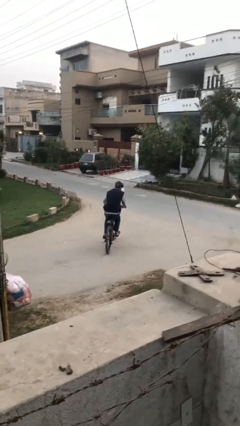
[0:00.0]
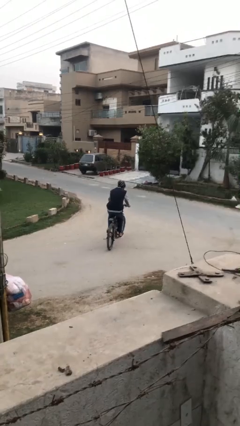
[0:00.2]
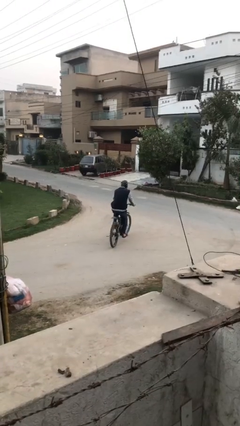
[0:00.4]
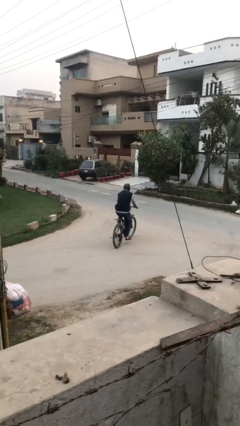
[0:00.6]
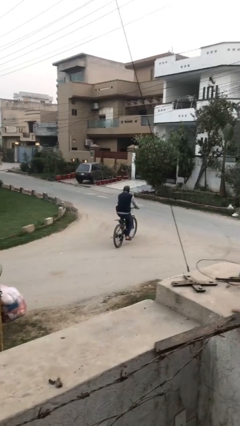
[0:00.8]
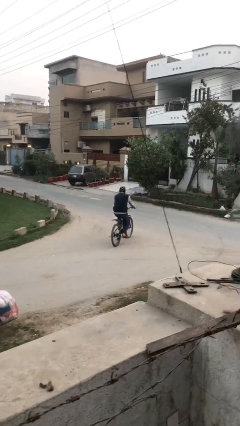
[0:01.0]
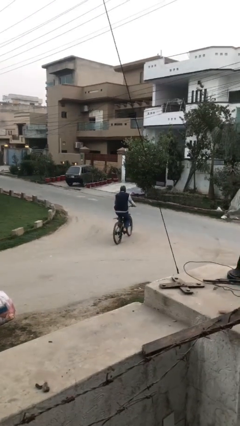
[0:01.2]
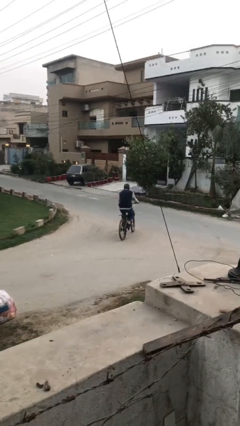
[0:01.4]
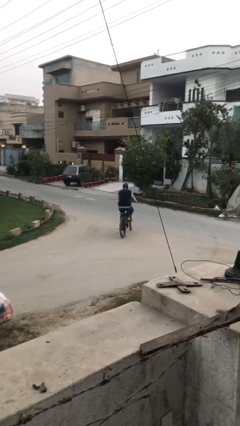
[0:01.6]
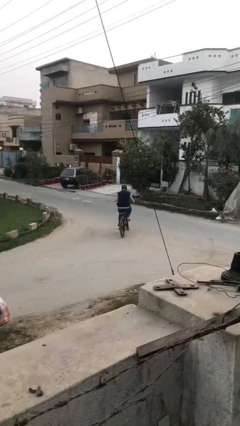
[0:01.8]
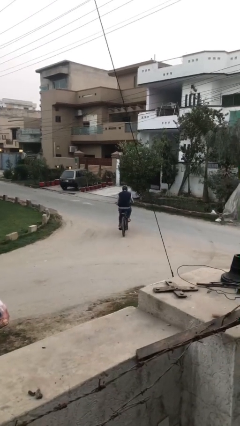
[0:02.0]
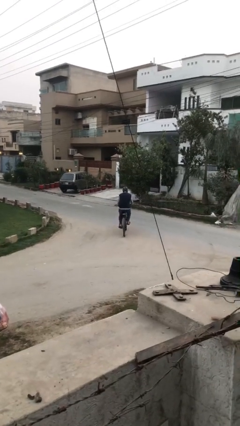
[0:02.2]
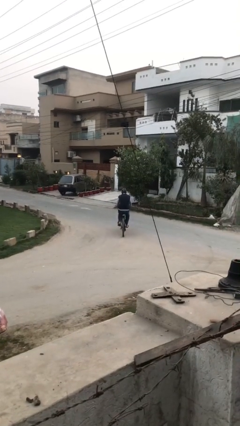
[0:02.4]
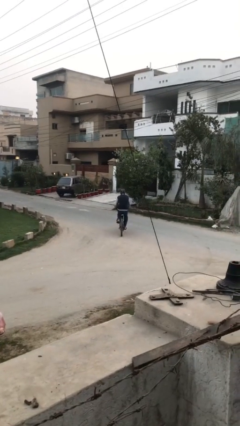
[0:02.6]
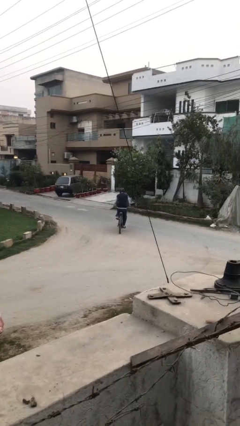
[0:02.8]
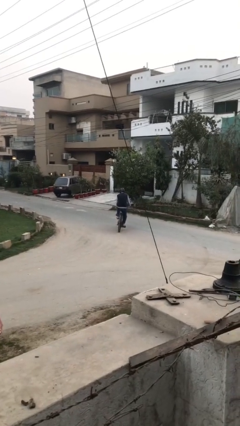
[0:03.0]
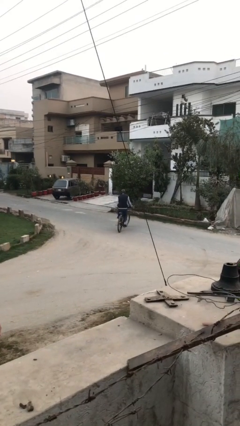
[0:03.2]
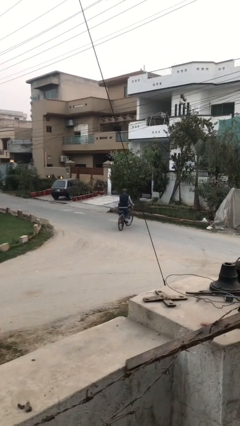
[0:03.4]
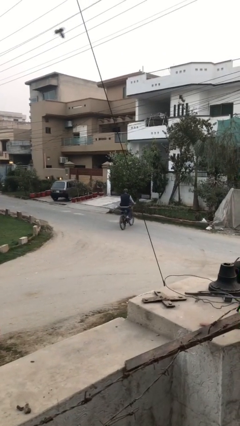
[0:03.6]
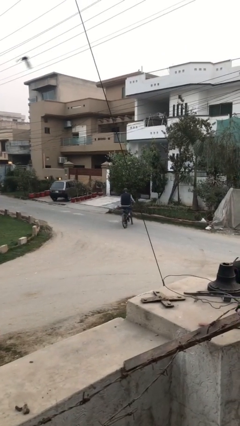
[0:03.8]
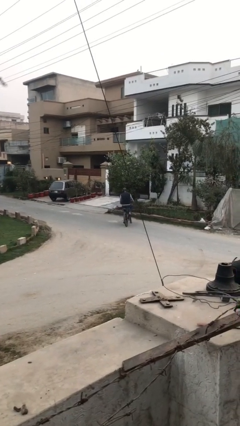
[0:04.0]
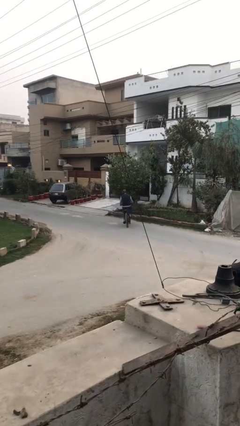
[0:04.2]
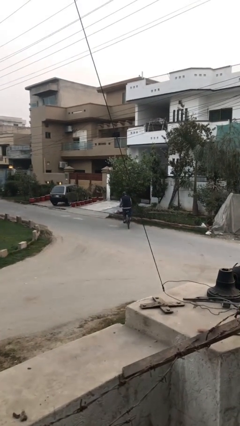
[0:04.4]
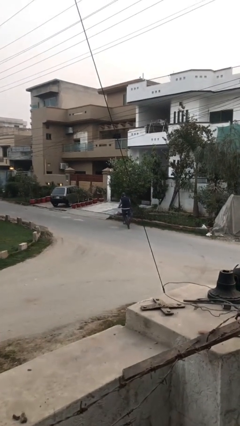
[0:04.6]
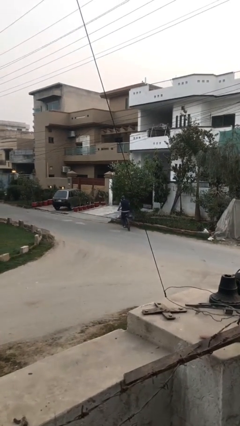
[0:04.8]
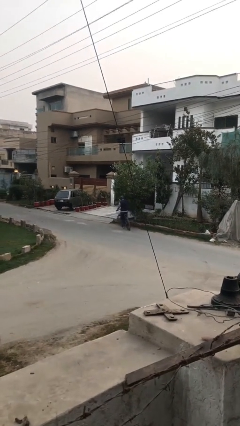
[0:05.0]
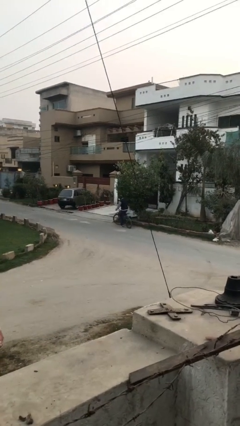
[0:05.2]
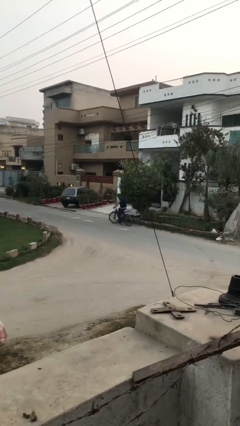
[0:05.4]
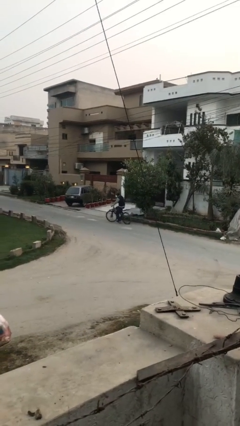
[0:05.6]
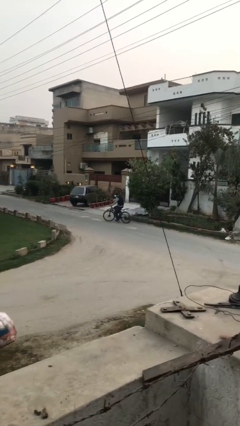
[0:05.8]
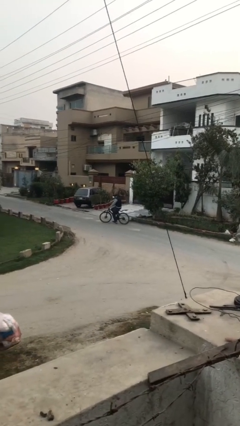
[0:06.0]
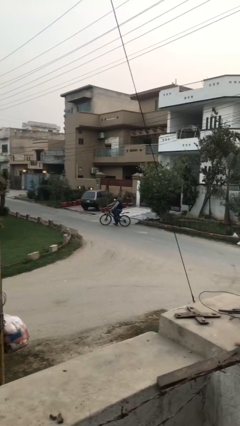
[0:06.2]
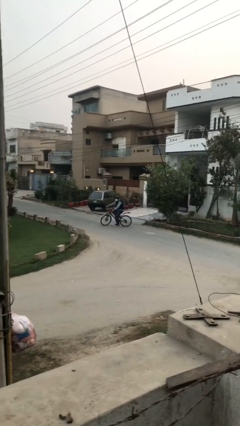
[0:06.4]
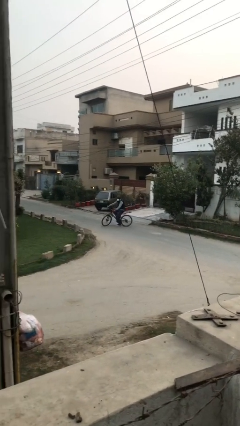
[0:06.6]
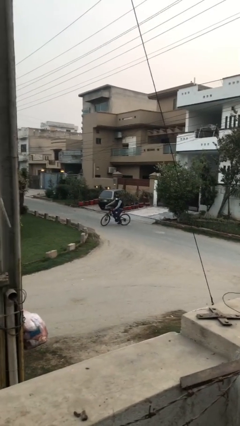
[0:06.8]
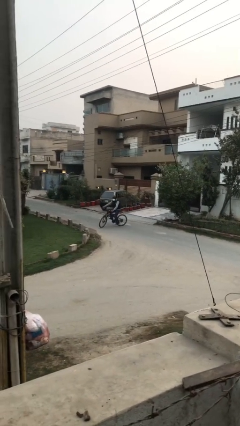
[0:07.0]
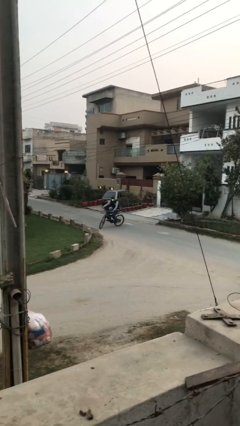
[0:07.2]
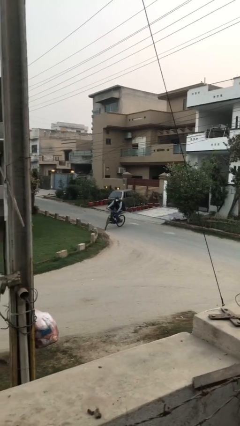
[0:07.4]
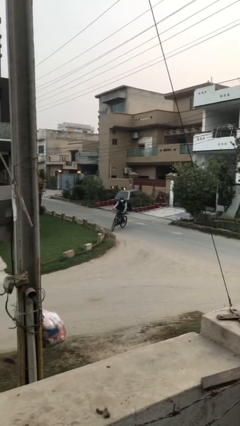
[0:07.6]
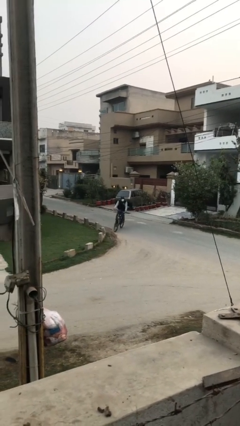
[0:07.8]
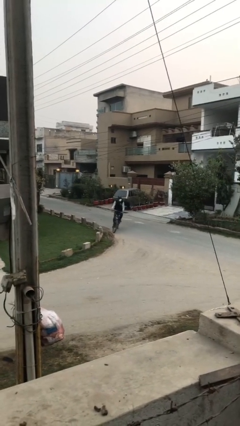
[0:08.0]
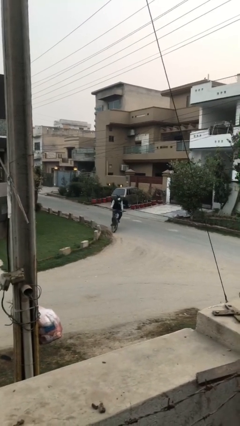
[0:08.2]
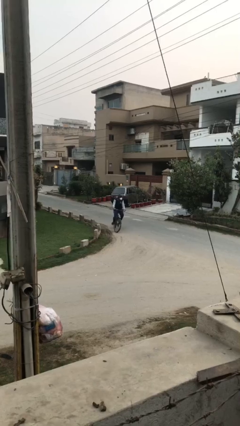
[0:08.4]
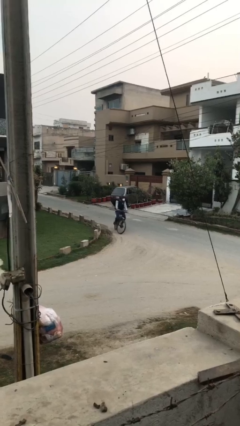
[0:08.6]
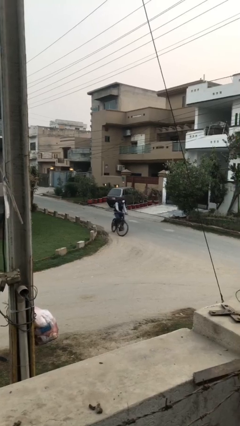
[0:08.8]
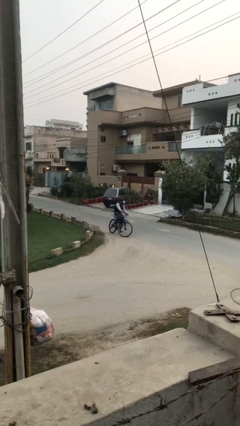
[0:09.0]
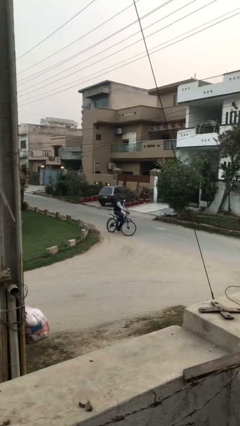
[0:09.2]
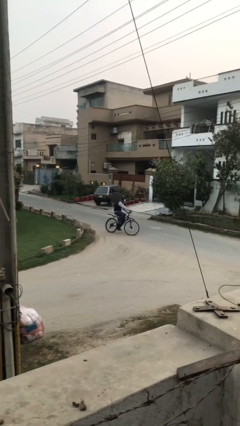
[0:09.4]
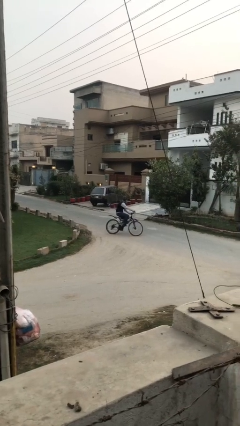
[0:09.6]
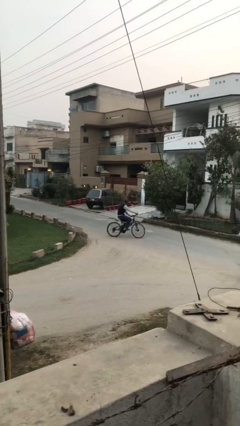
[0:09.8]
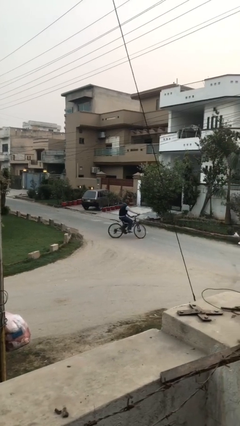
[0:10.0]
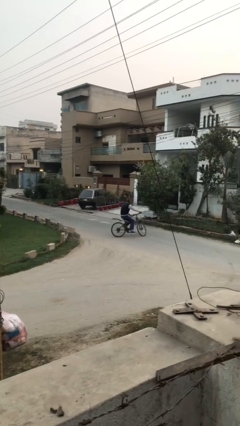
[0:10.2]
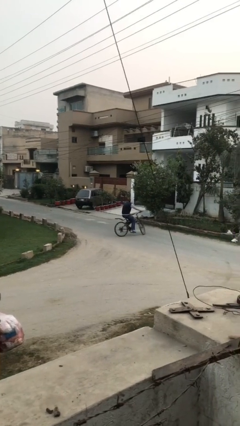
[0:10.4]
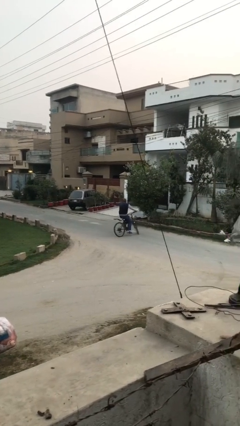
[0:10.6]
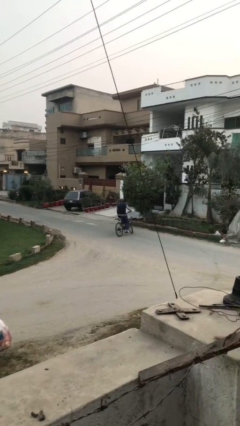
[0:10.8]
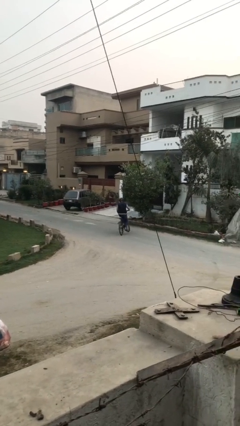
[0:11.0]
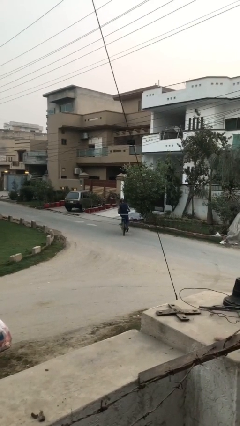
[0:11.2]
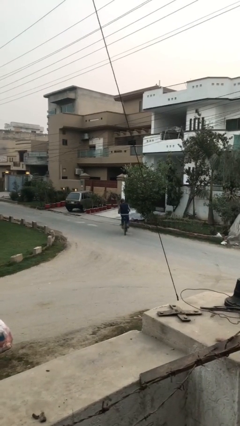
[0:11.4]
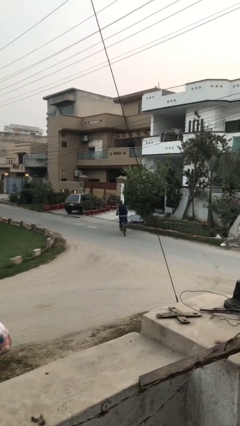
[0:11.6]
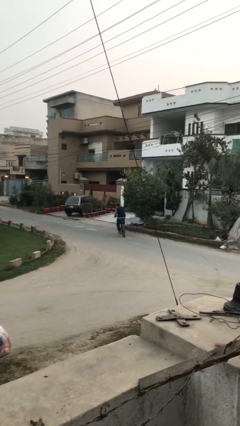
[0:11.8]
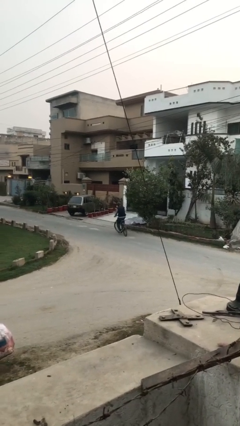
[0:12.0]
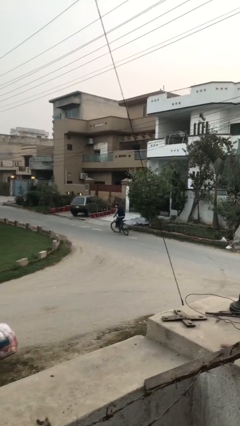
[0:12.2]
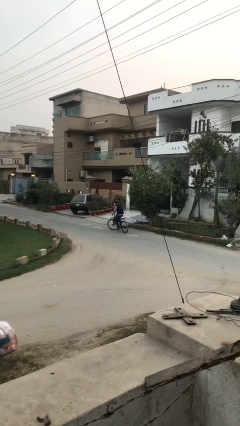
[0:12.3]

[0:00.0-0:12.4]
person rides bicycle

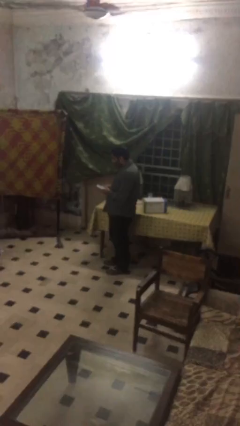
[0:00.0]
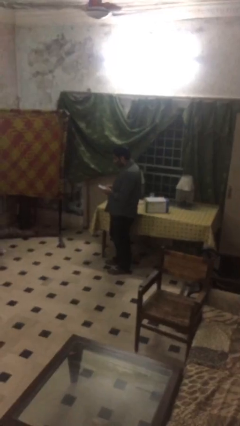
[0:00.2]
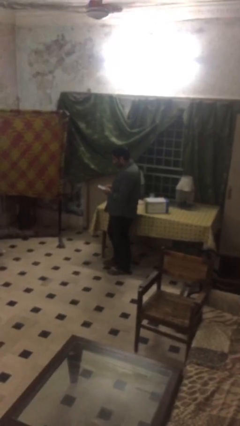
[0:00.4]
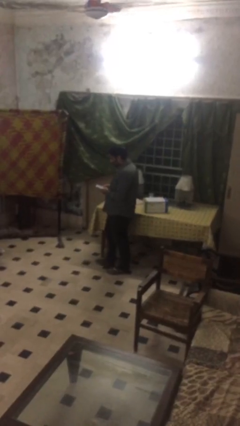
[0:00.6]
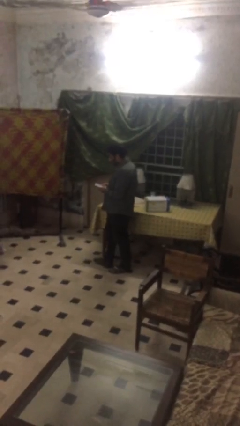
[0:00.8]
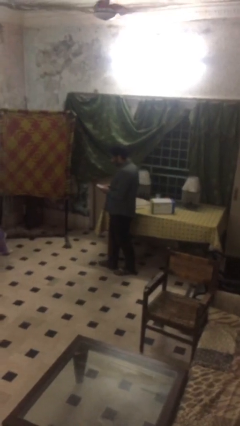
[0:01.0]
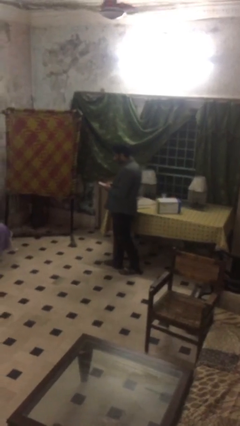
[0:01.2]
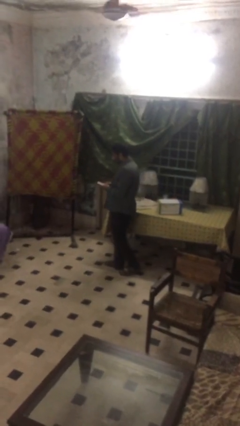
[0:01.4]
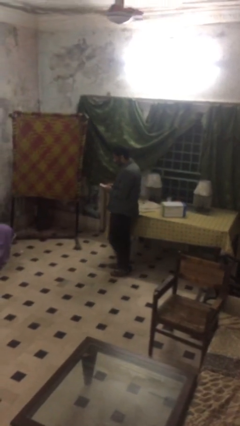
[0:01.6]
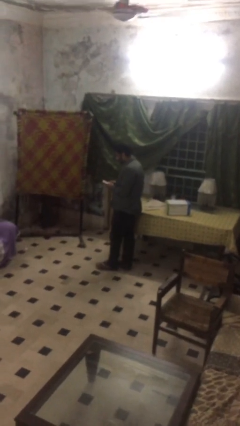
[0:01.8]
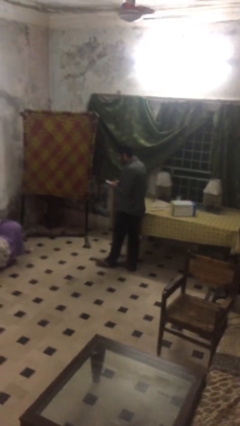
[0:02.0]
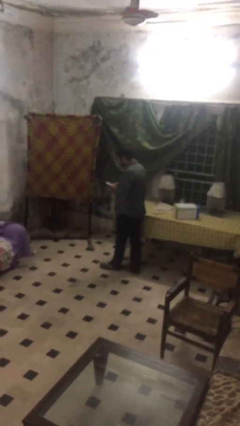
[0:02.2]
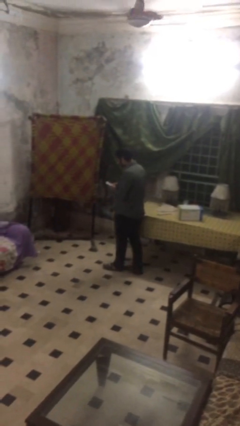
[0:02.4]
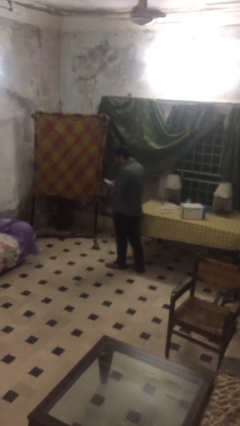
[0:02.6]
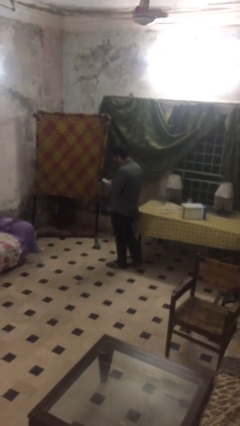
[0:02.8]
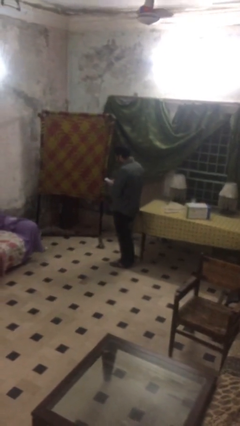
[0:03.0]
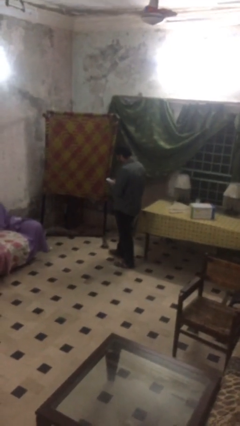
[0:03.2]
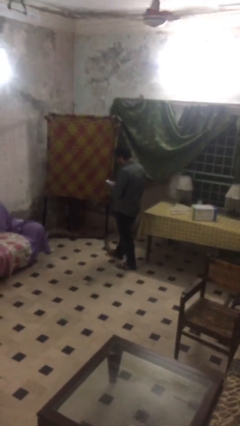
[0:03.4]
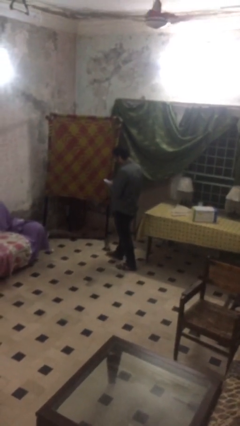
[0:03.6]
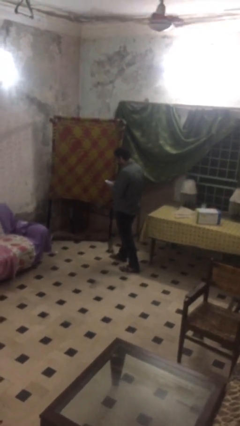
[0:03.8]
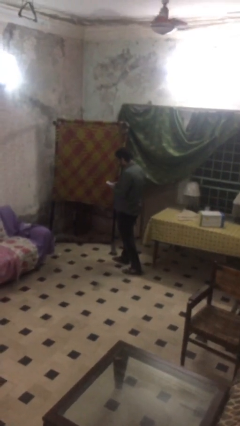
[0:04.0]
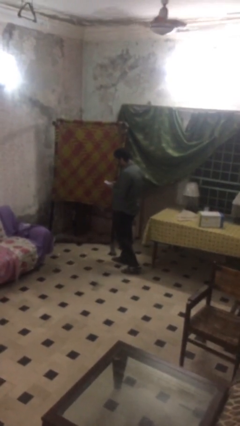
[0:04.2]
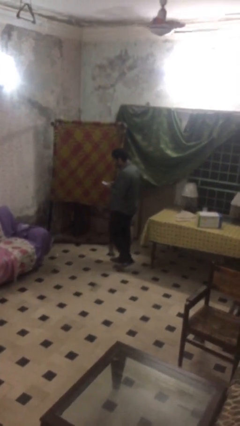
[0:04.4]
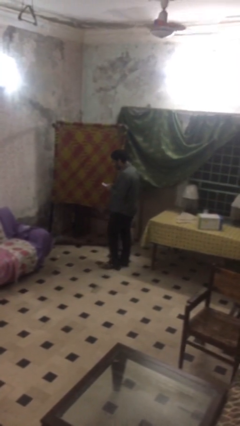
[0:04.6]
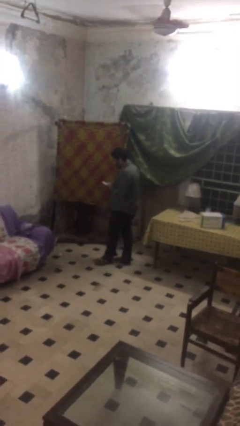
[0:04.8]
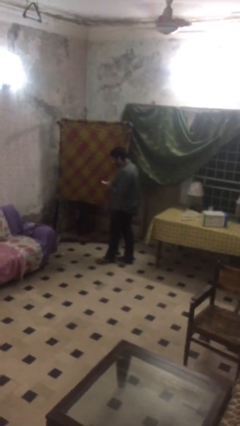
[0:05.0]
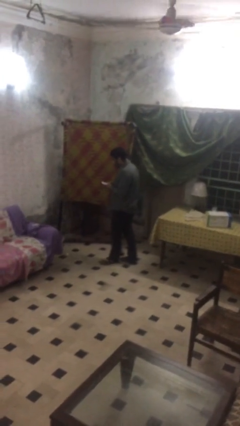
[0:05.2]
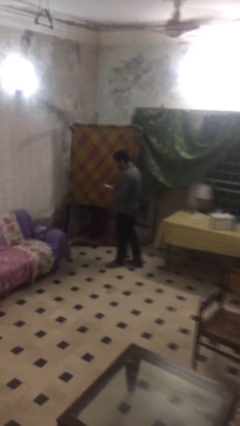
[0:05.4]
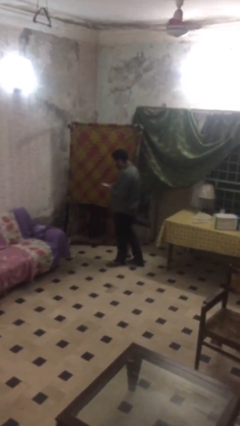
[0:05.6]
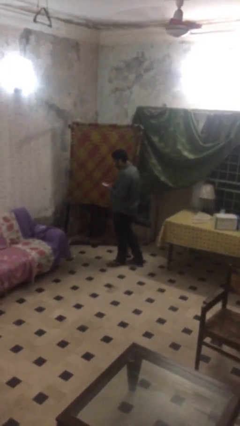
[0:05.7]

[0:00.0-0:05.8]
person texts on phone
